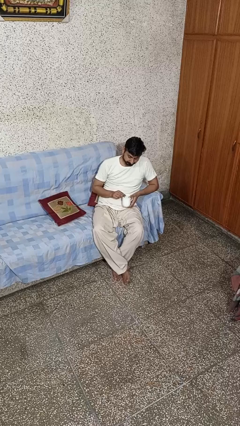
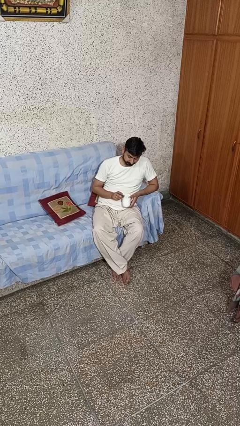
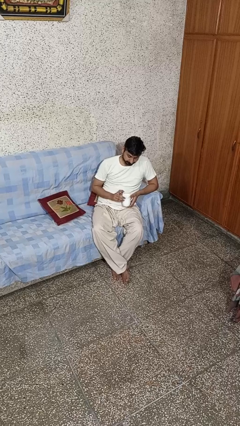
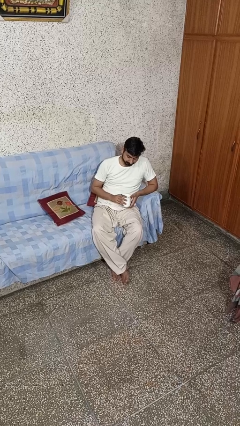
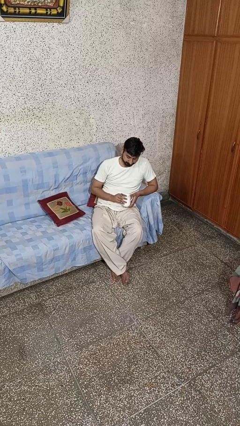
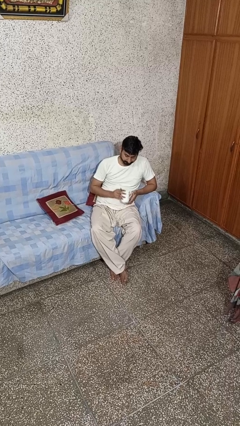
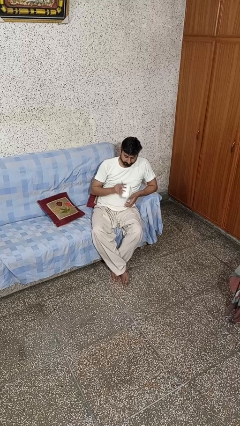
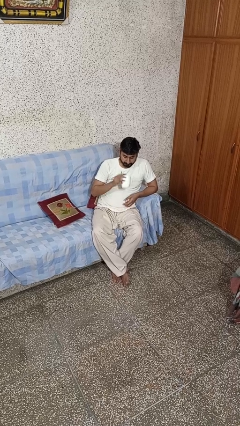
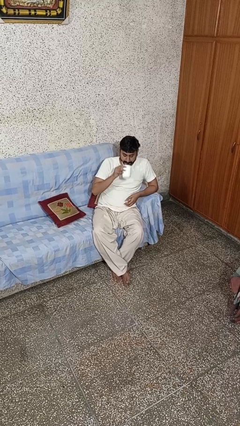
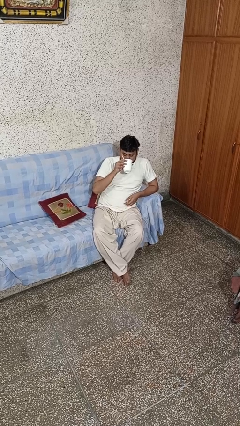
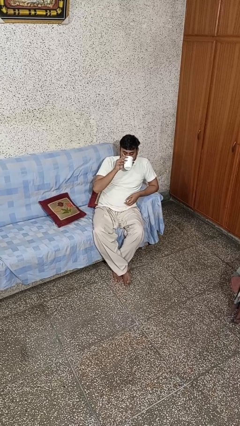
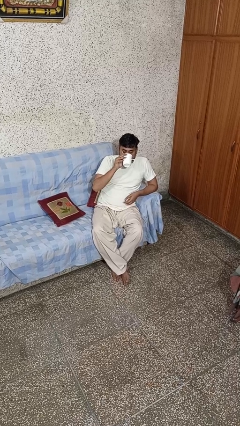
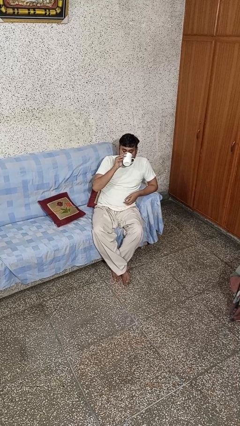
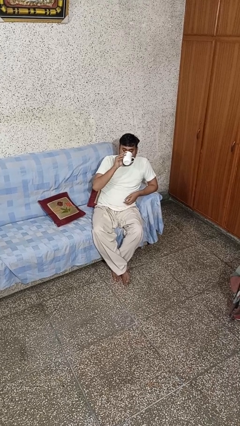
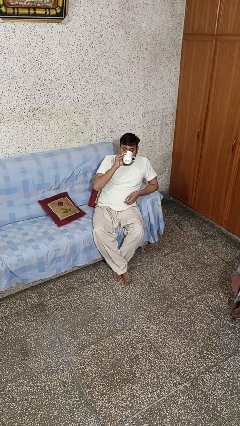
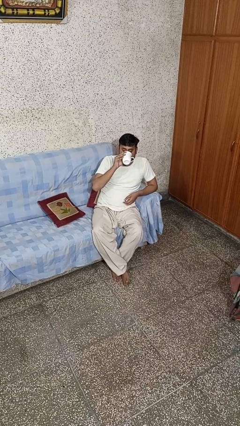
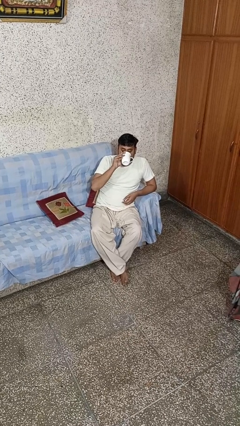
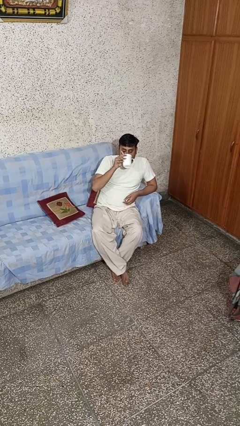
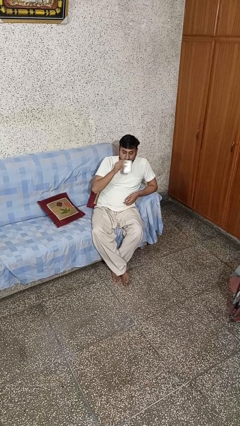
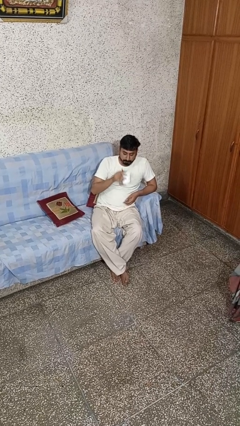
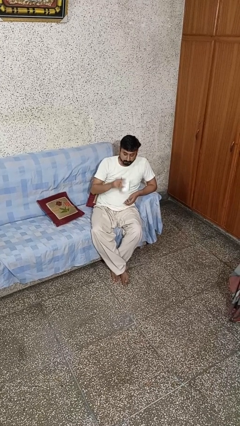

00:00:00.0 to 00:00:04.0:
person drinks from mug

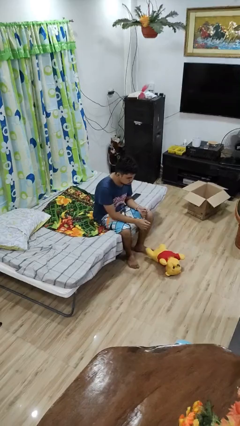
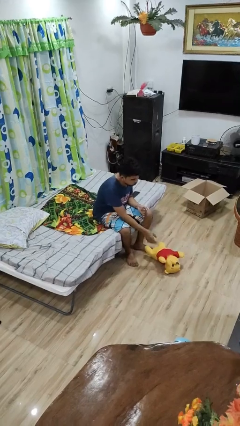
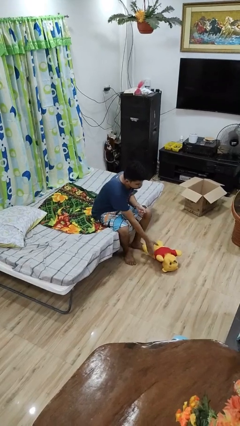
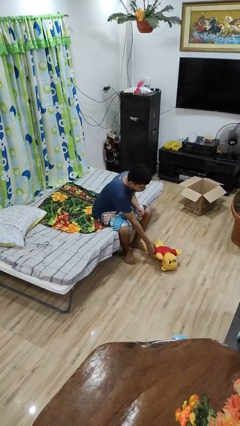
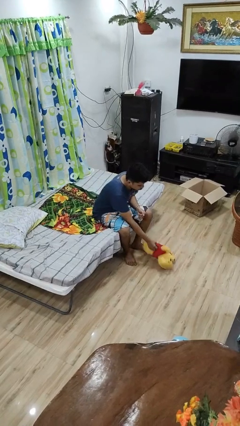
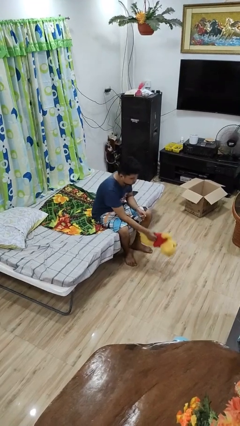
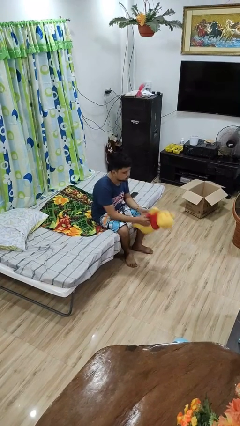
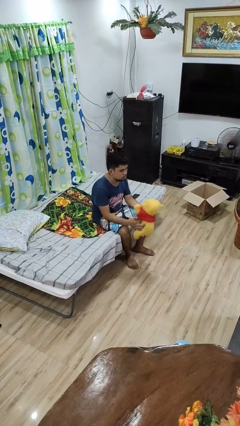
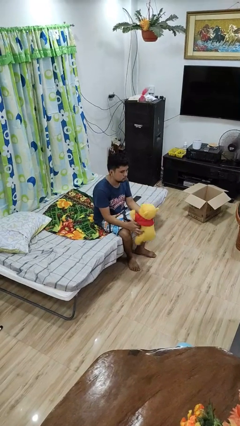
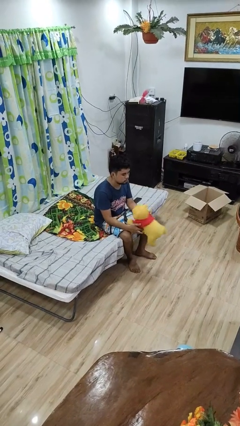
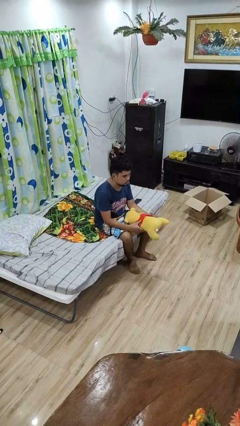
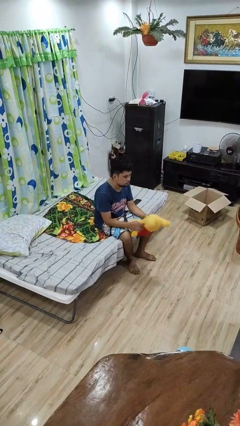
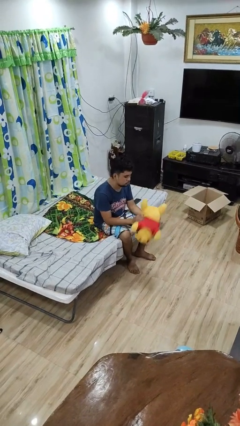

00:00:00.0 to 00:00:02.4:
person picks up object from floor

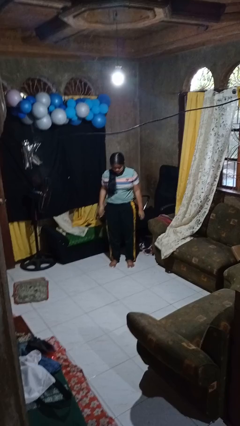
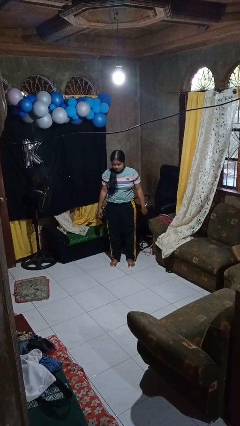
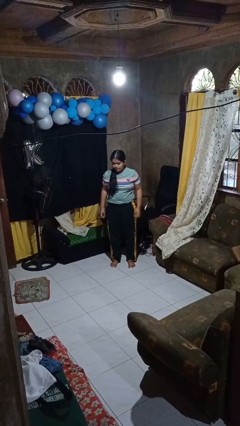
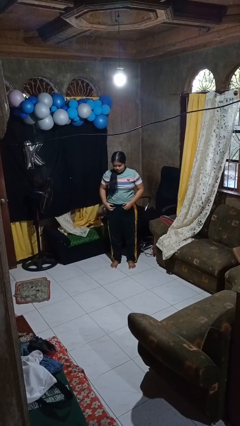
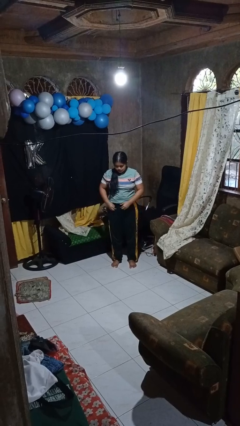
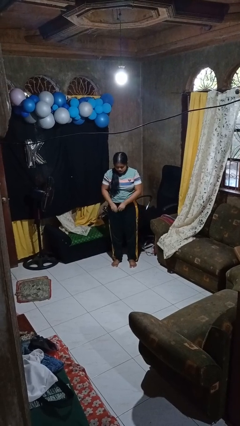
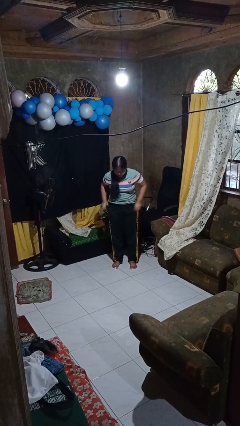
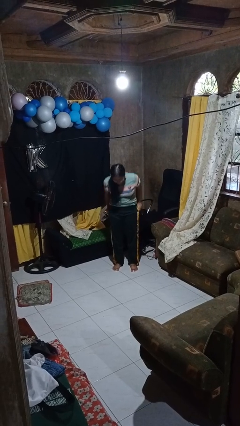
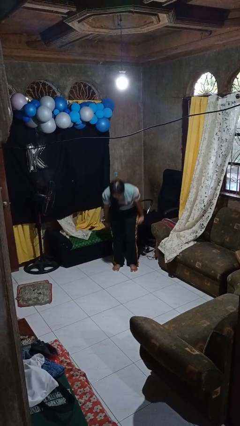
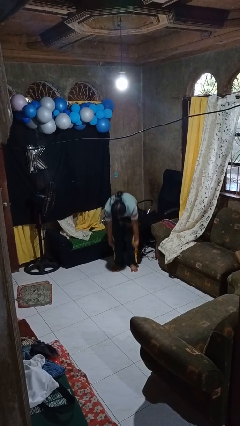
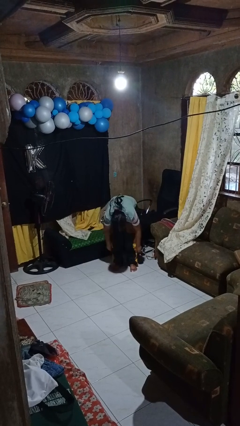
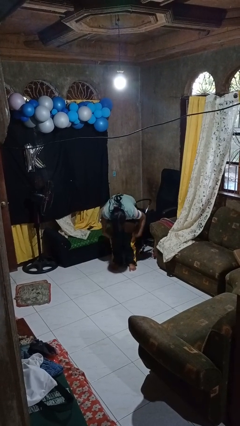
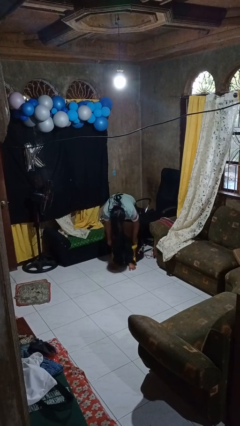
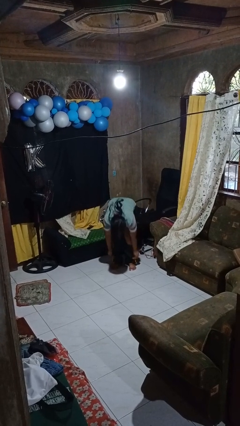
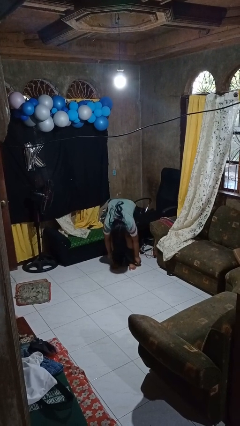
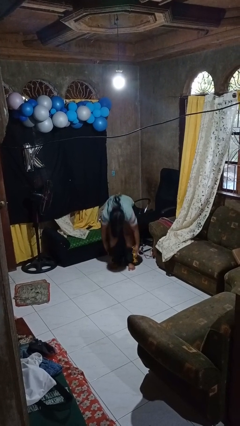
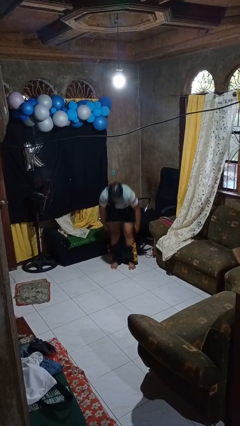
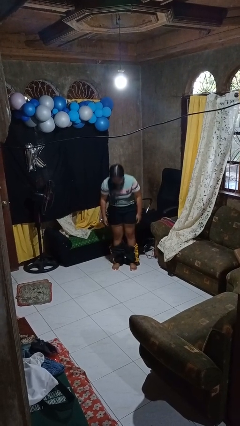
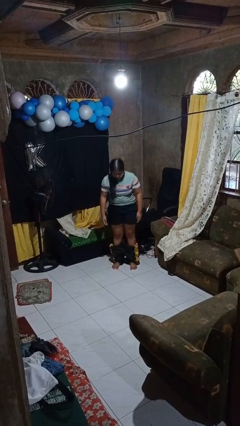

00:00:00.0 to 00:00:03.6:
person takes off pants

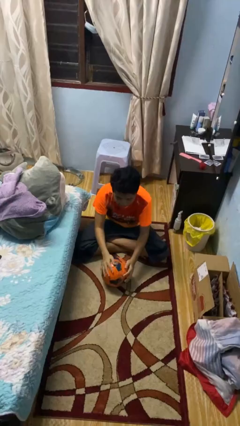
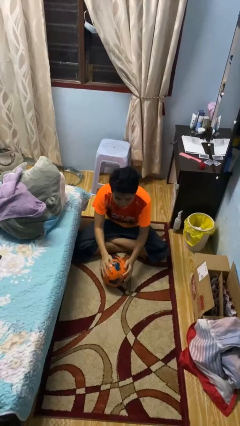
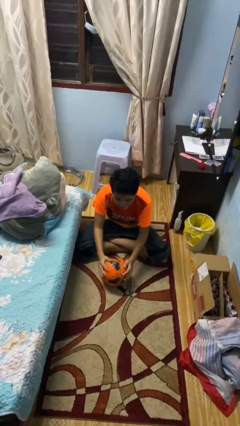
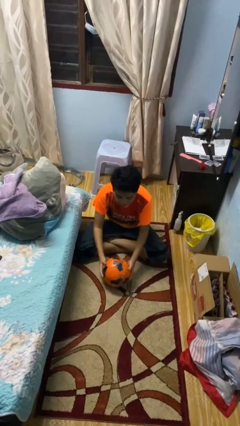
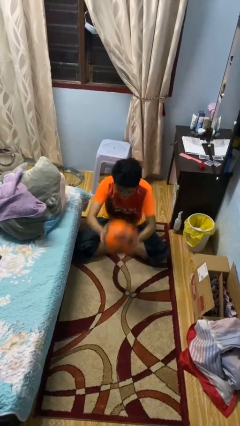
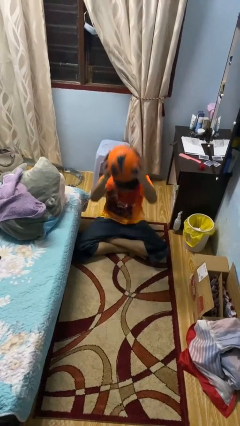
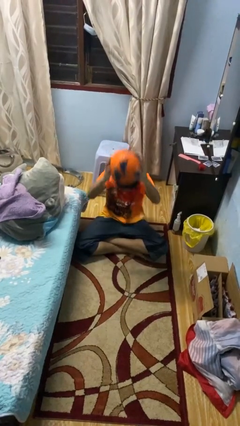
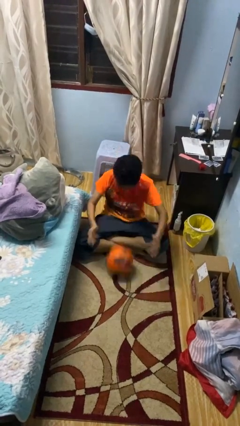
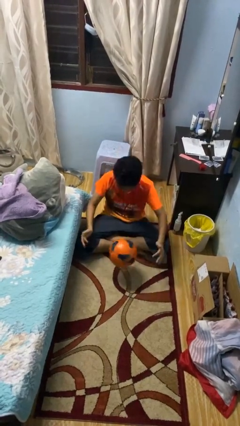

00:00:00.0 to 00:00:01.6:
person bounces ball on floor

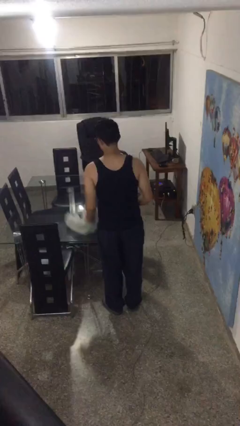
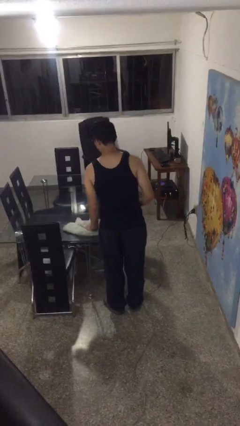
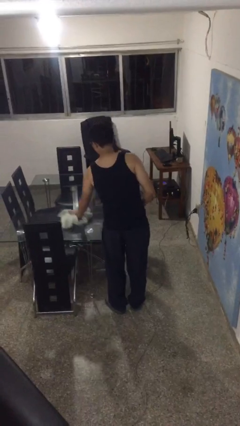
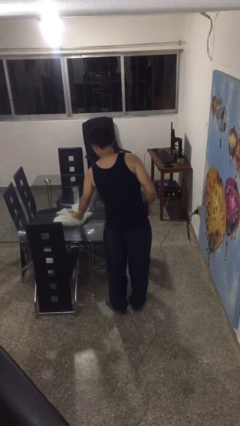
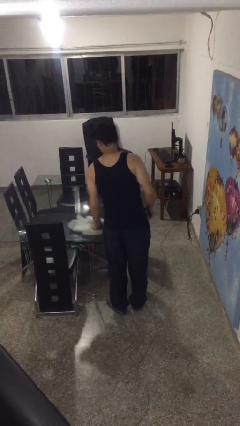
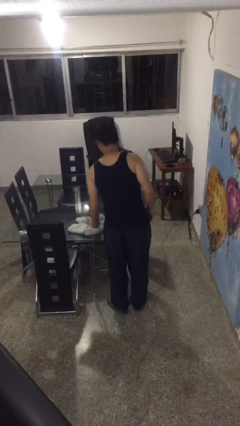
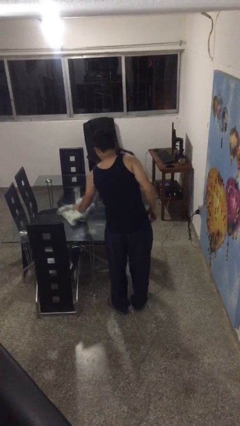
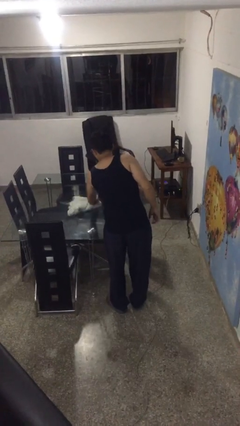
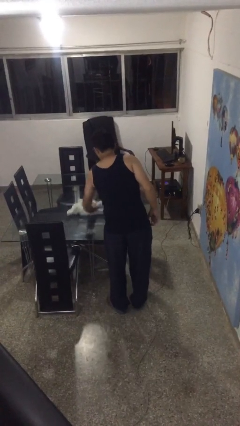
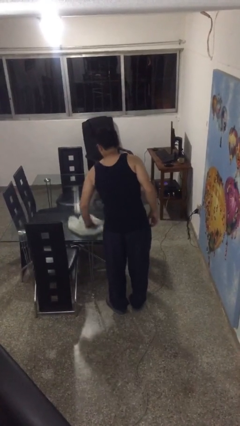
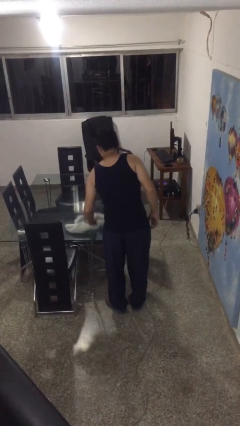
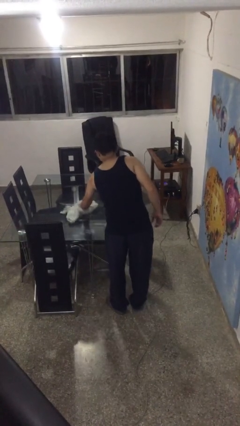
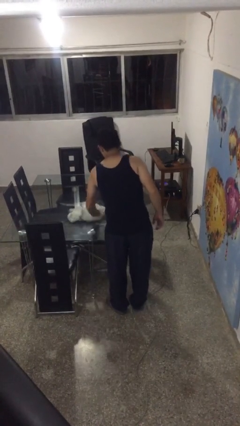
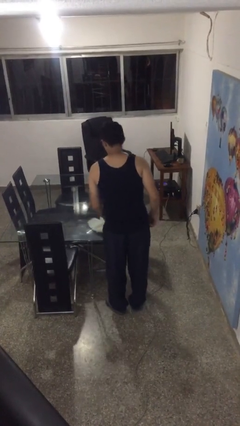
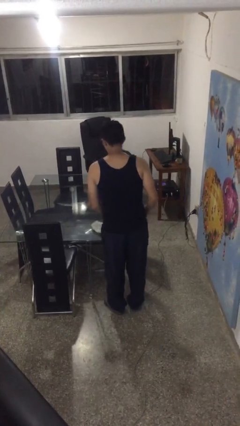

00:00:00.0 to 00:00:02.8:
person cleans table with rag

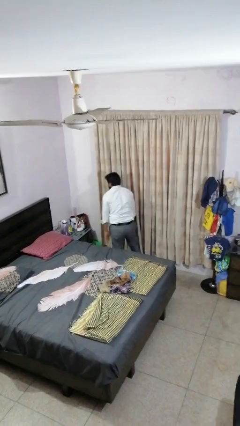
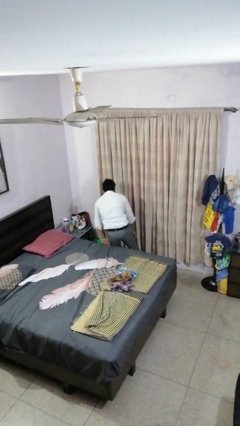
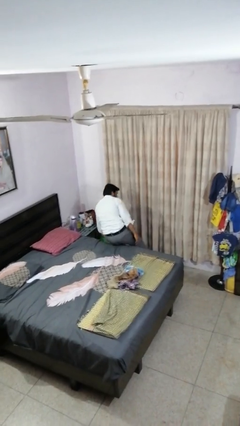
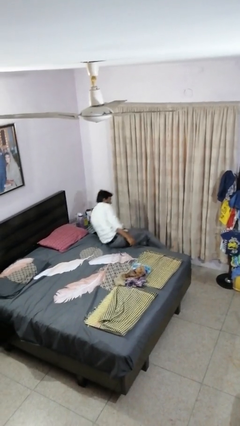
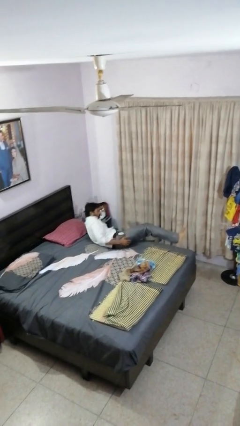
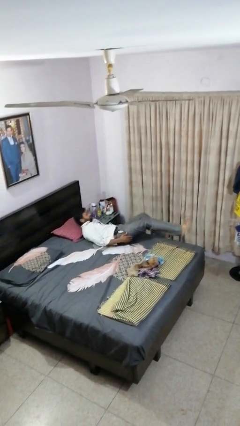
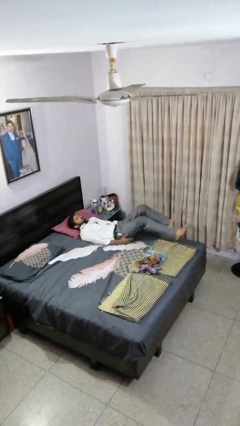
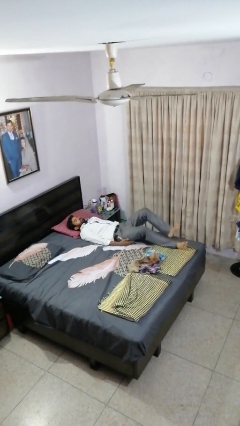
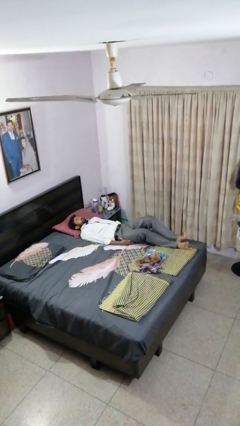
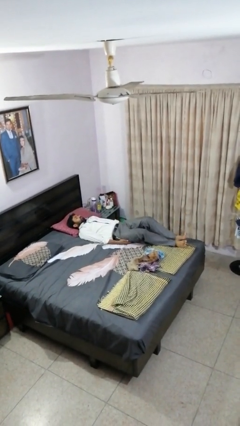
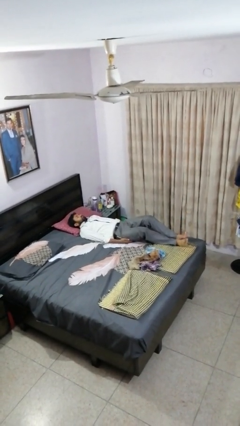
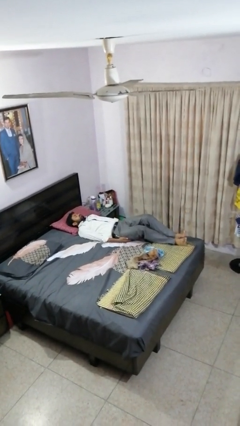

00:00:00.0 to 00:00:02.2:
person lies down on bed

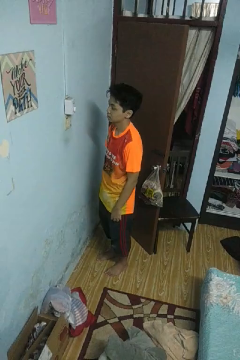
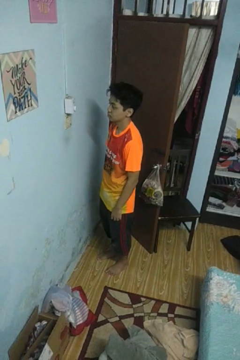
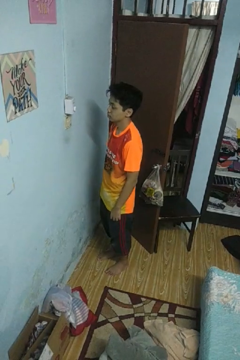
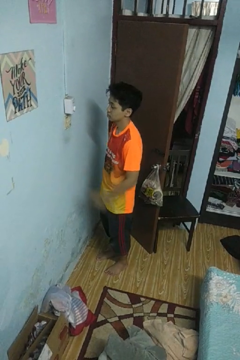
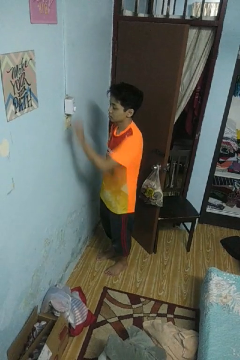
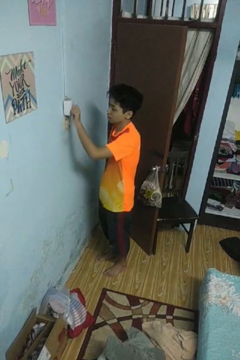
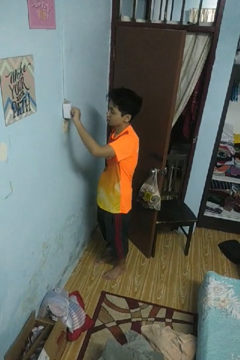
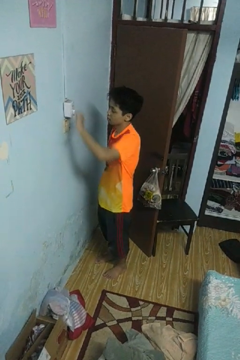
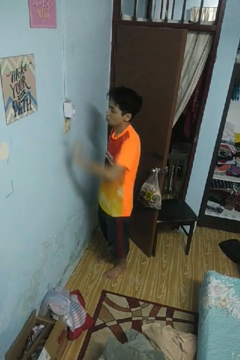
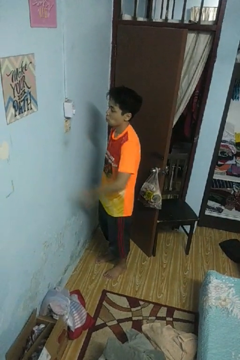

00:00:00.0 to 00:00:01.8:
person adjusts thermostat
